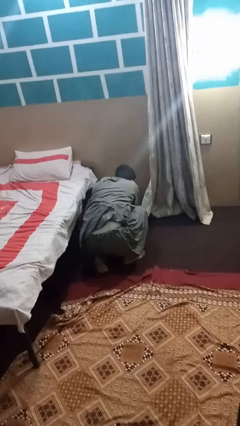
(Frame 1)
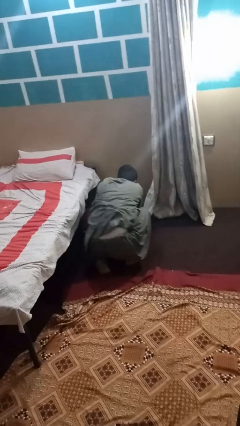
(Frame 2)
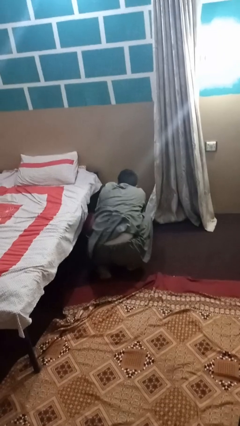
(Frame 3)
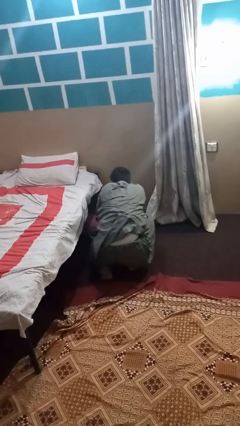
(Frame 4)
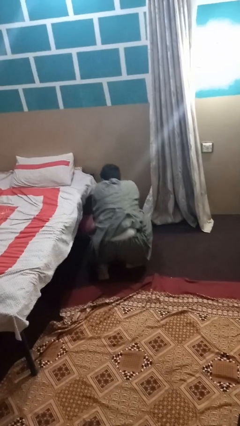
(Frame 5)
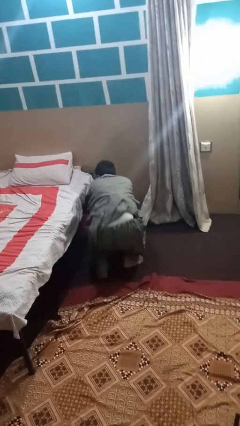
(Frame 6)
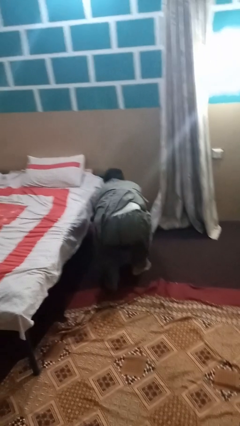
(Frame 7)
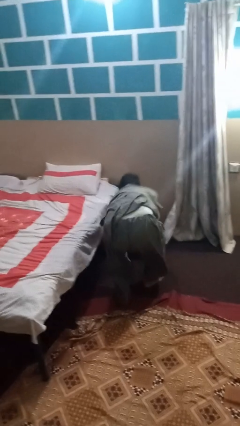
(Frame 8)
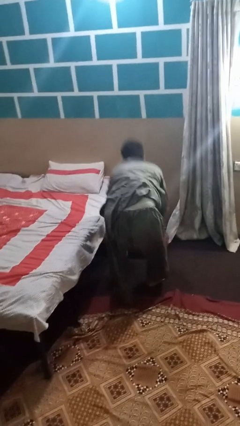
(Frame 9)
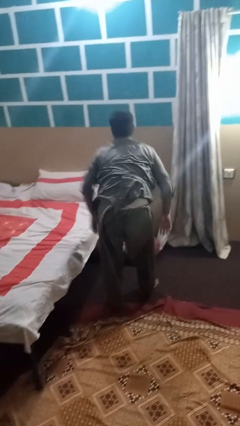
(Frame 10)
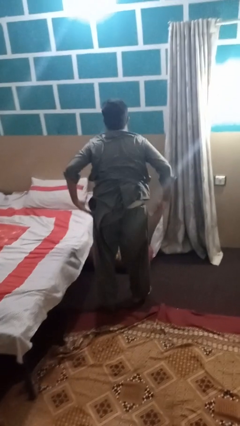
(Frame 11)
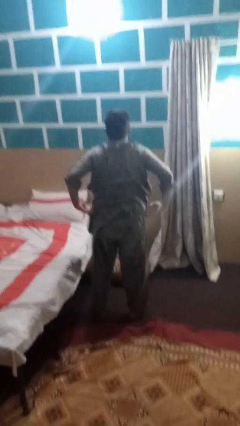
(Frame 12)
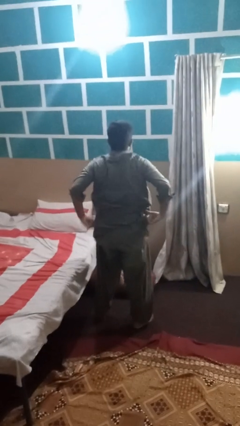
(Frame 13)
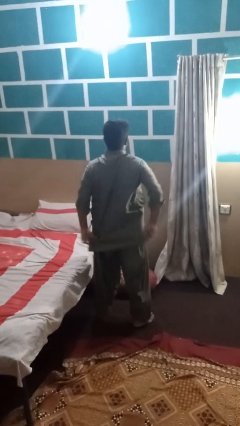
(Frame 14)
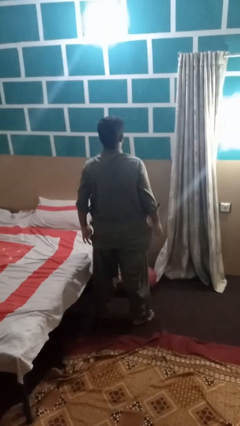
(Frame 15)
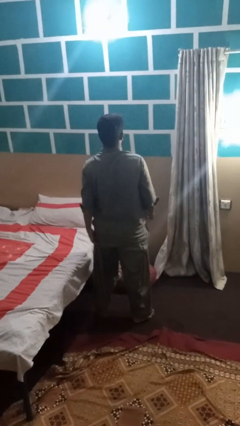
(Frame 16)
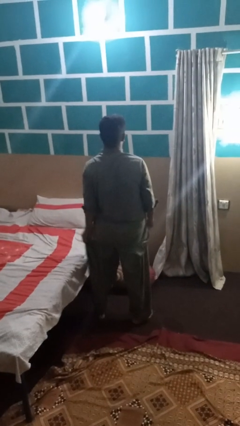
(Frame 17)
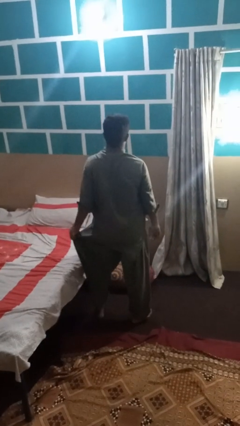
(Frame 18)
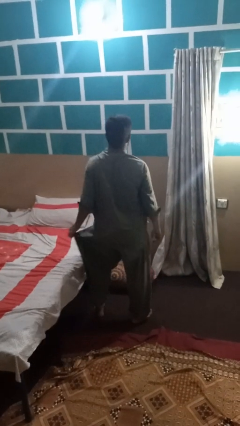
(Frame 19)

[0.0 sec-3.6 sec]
person stands up from floor

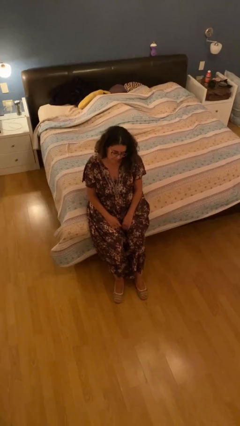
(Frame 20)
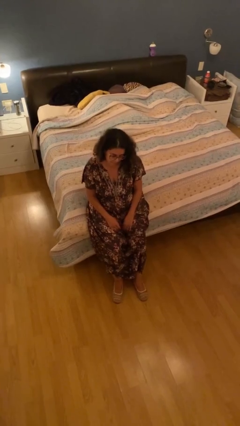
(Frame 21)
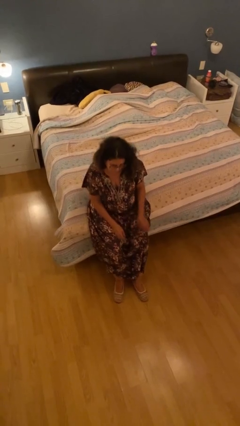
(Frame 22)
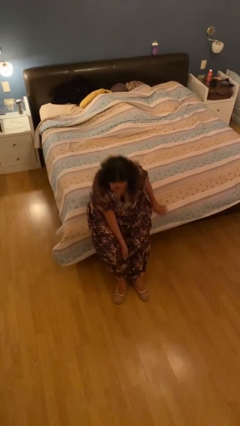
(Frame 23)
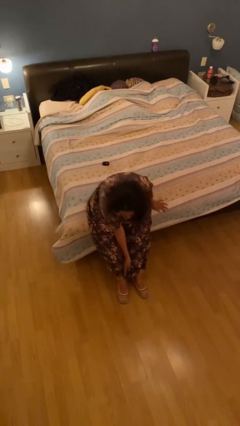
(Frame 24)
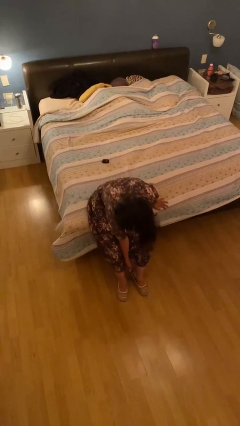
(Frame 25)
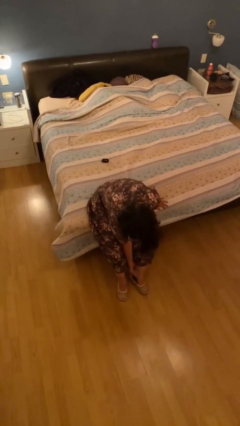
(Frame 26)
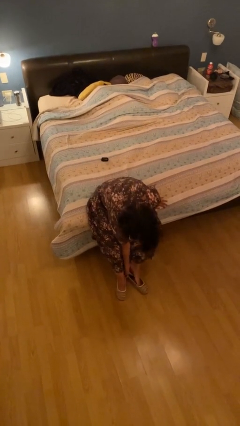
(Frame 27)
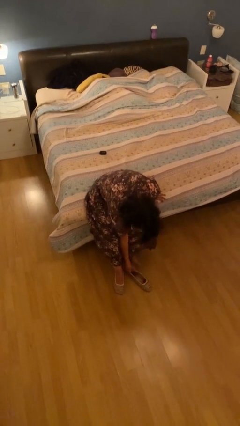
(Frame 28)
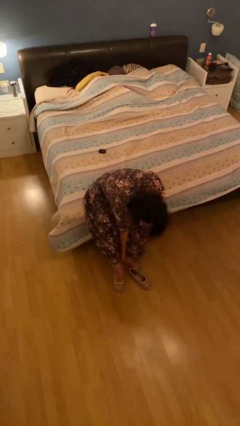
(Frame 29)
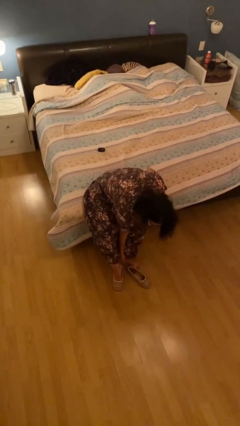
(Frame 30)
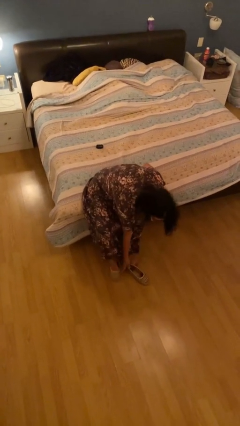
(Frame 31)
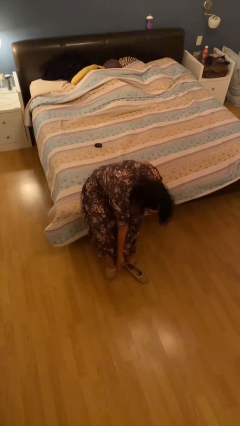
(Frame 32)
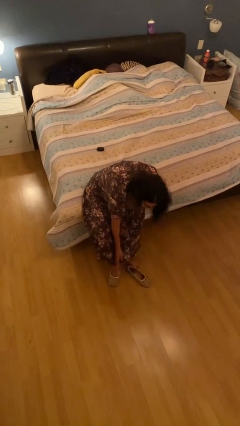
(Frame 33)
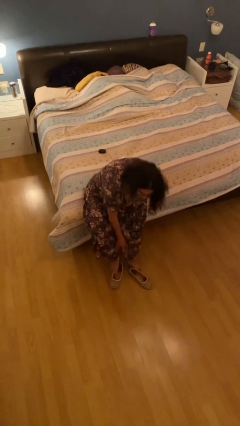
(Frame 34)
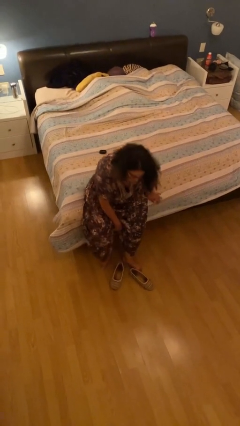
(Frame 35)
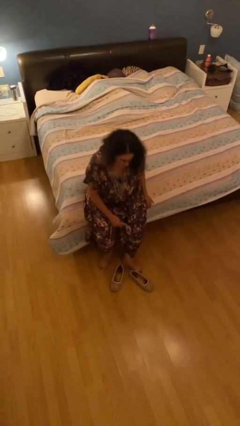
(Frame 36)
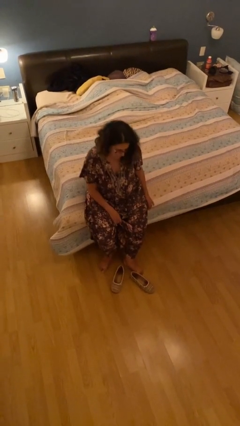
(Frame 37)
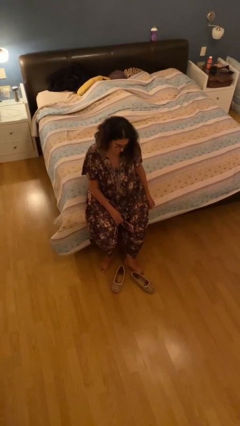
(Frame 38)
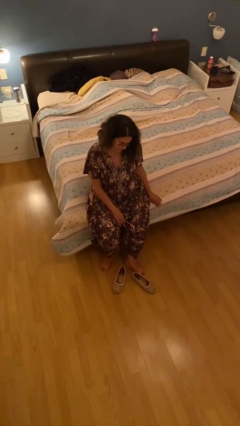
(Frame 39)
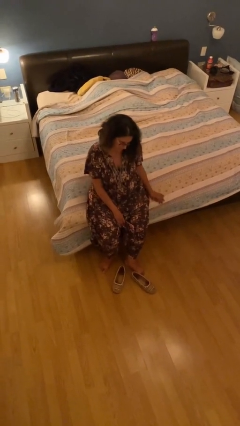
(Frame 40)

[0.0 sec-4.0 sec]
person takes off shoes

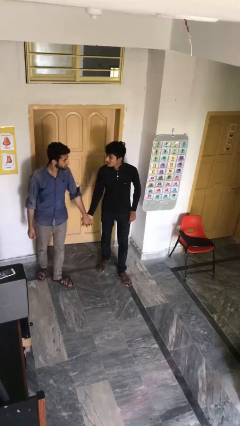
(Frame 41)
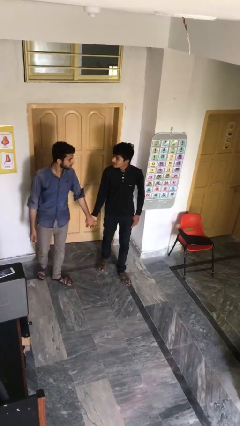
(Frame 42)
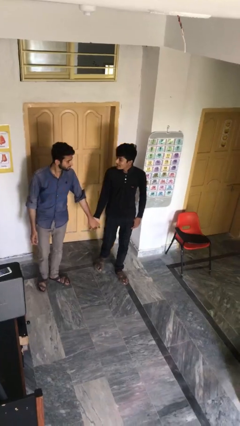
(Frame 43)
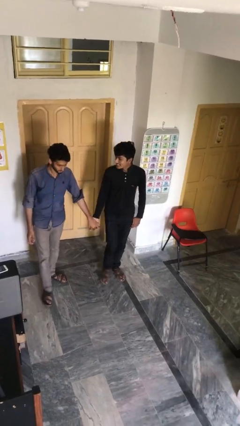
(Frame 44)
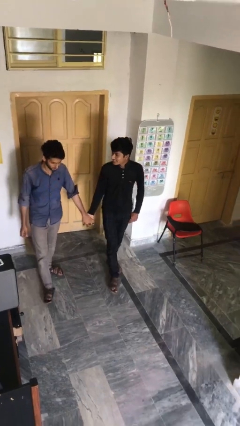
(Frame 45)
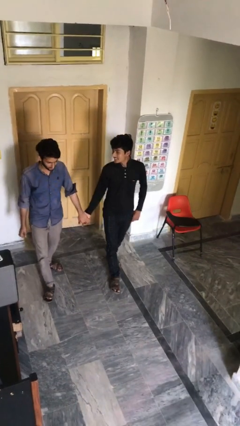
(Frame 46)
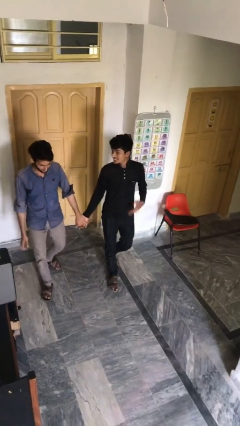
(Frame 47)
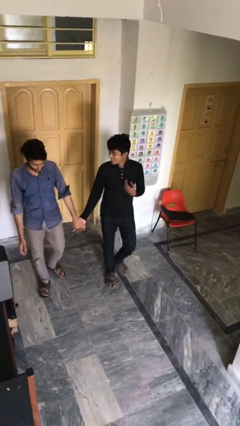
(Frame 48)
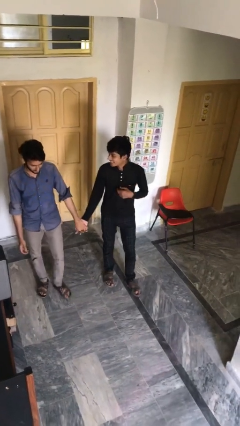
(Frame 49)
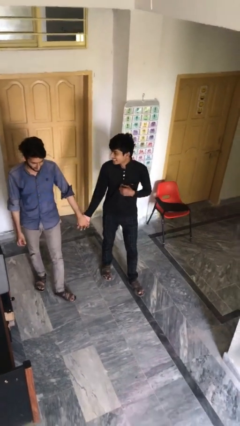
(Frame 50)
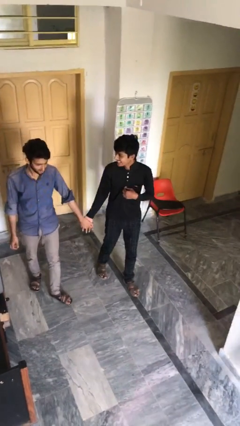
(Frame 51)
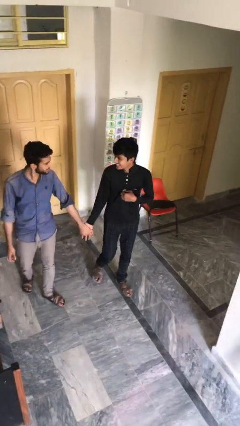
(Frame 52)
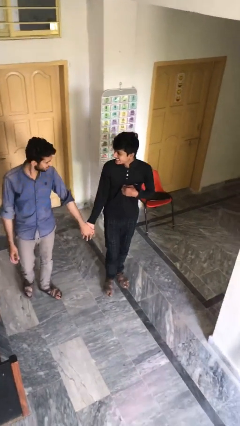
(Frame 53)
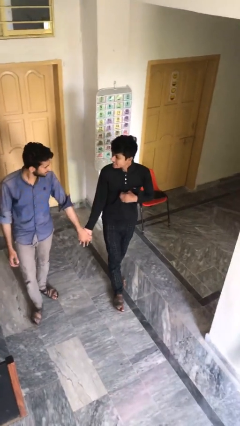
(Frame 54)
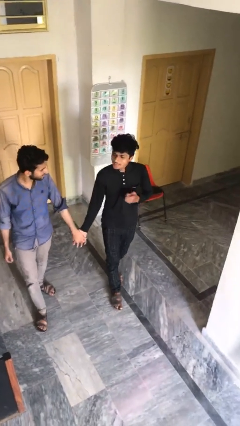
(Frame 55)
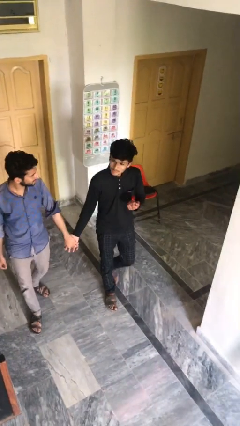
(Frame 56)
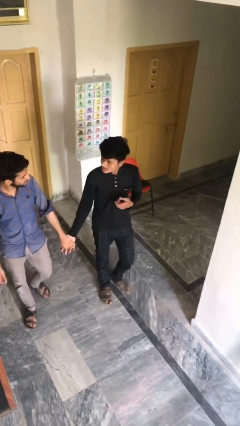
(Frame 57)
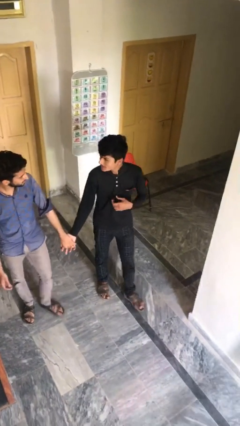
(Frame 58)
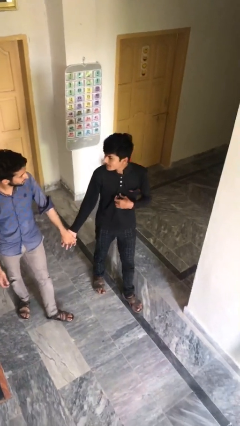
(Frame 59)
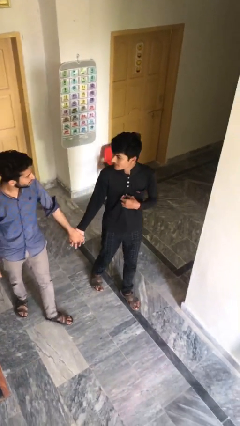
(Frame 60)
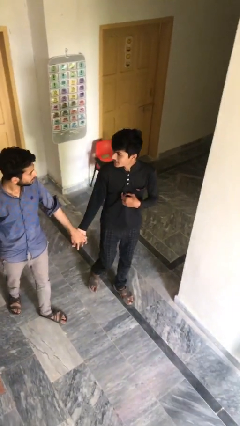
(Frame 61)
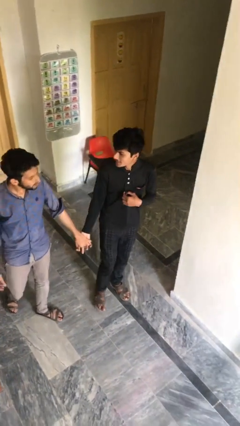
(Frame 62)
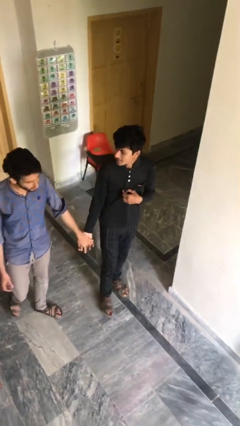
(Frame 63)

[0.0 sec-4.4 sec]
person holds hand

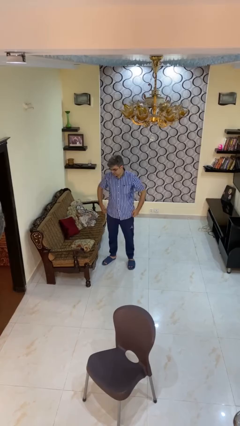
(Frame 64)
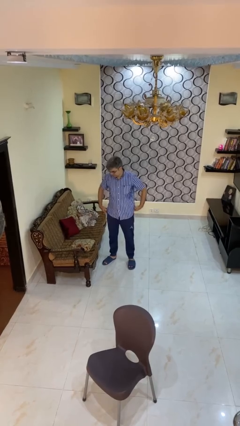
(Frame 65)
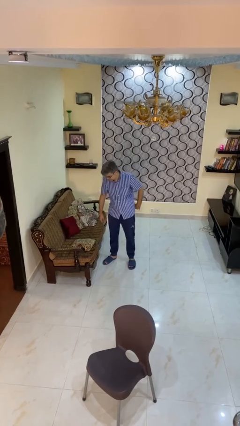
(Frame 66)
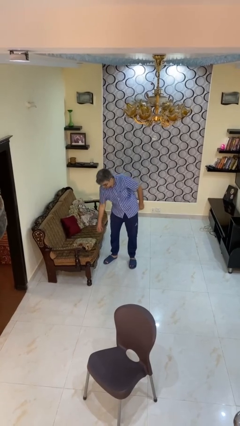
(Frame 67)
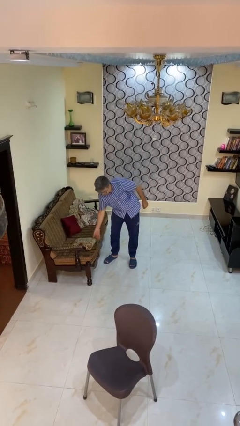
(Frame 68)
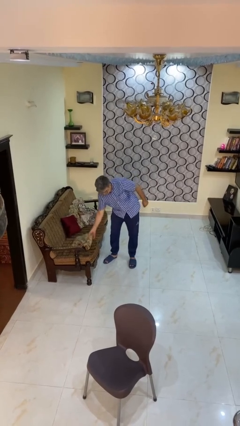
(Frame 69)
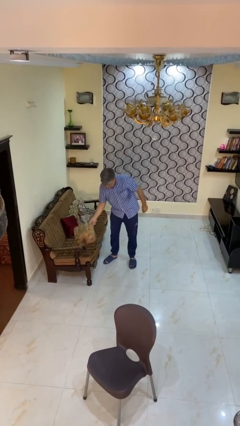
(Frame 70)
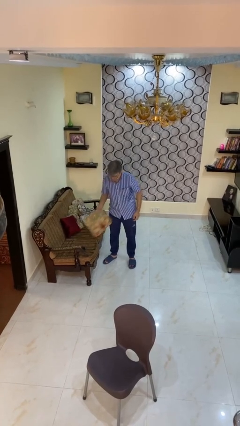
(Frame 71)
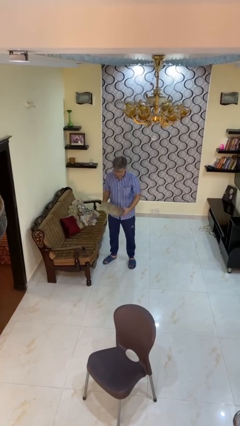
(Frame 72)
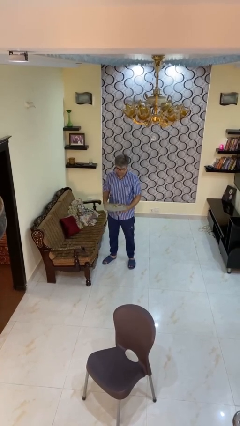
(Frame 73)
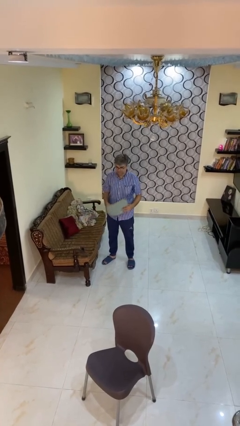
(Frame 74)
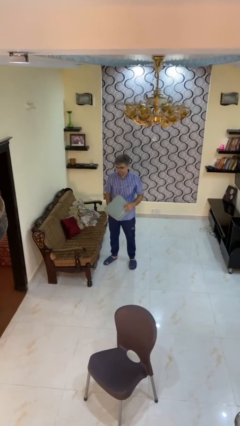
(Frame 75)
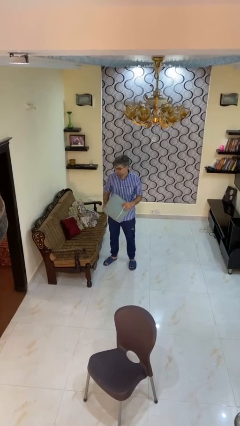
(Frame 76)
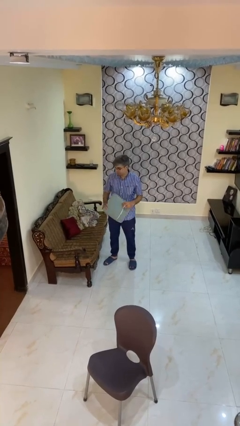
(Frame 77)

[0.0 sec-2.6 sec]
person picks up object from couch

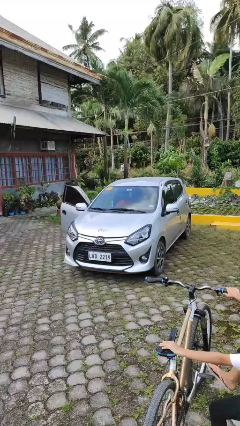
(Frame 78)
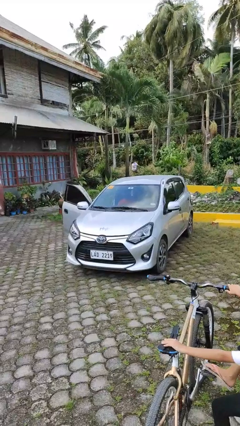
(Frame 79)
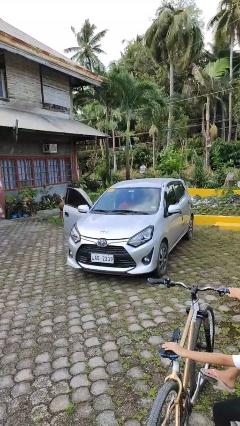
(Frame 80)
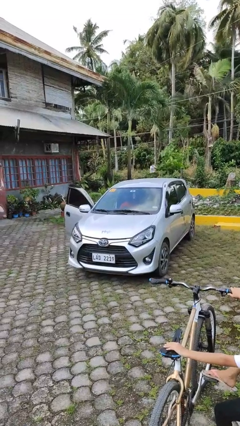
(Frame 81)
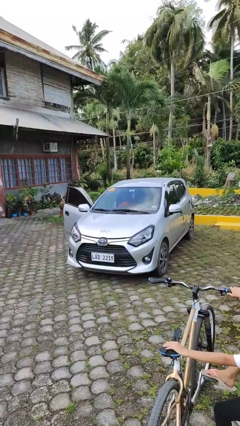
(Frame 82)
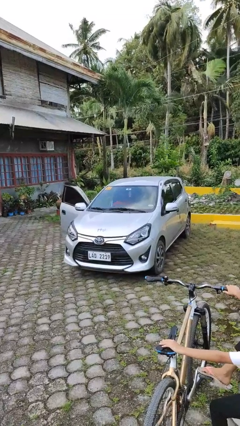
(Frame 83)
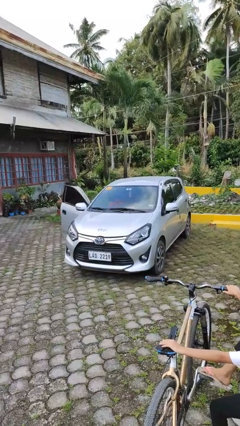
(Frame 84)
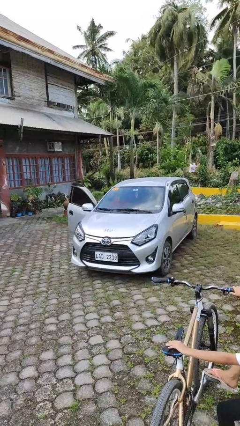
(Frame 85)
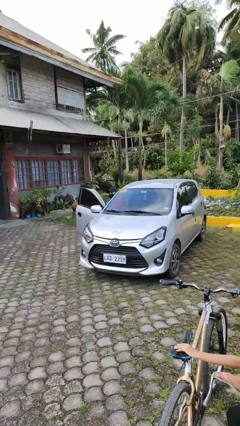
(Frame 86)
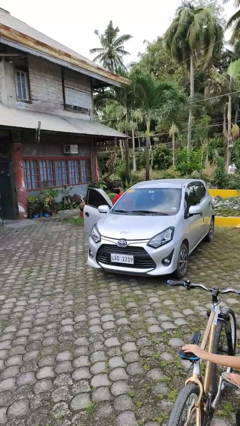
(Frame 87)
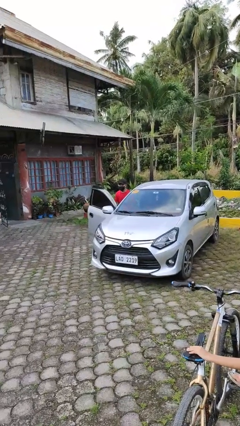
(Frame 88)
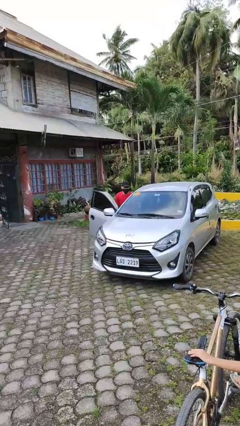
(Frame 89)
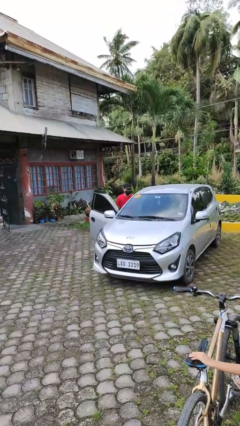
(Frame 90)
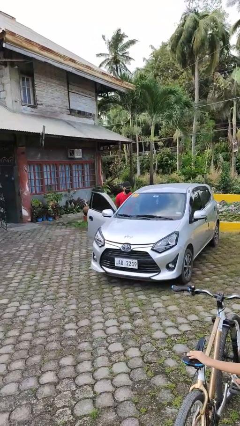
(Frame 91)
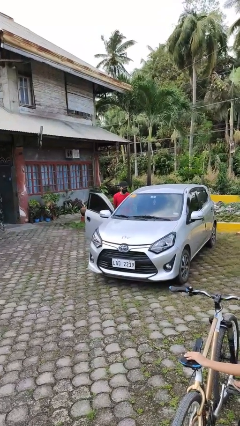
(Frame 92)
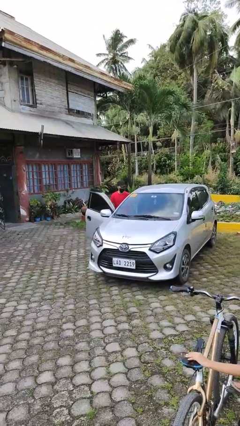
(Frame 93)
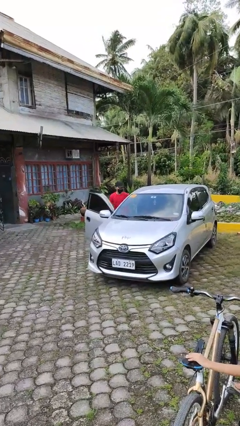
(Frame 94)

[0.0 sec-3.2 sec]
person exits car
